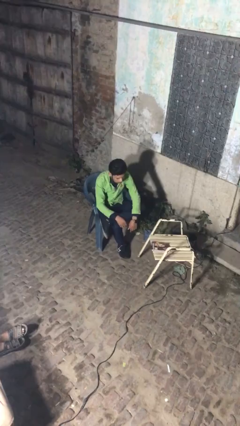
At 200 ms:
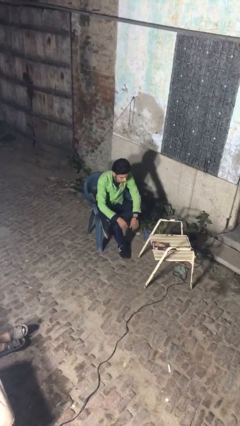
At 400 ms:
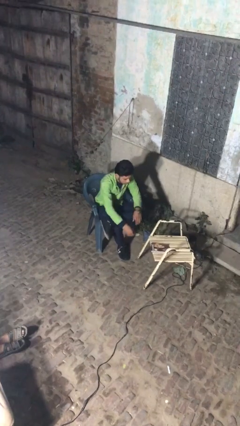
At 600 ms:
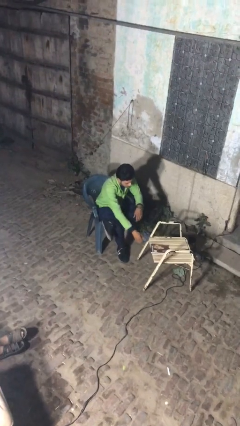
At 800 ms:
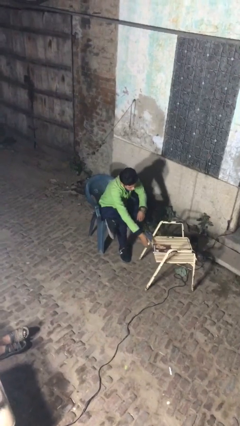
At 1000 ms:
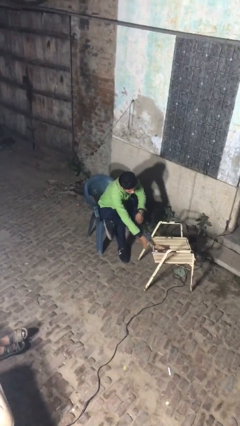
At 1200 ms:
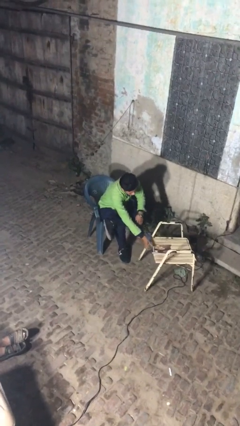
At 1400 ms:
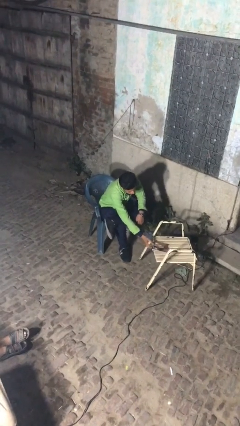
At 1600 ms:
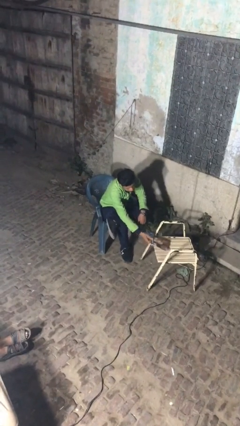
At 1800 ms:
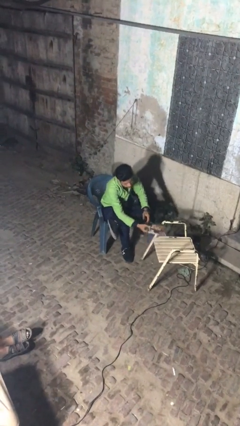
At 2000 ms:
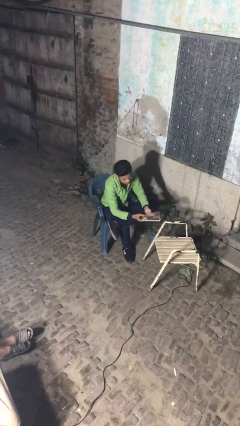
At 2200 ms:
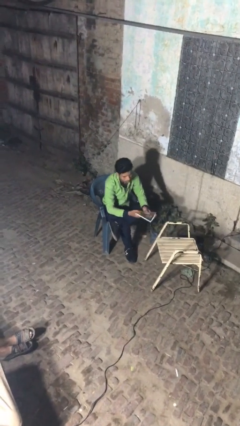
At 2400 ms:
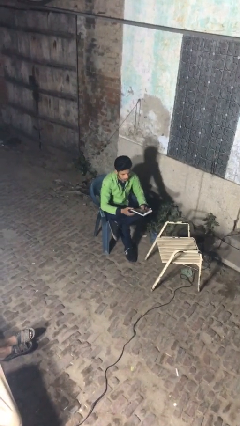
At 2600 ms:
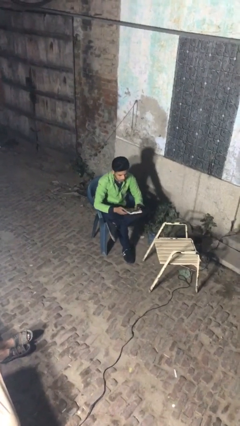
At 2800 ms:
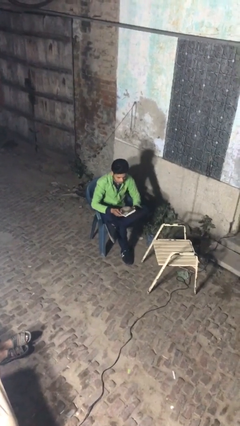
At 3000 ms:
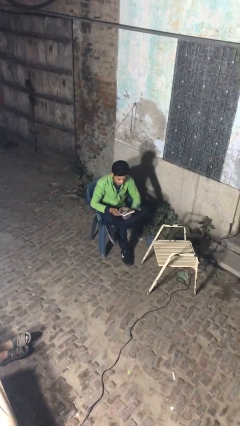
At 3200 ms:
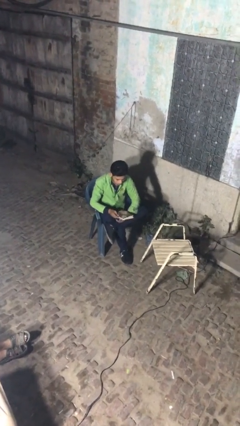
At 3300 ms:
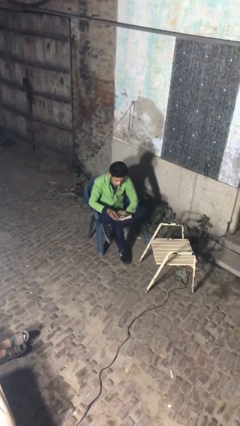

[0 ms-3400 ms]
person picks up object from table

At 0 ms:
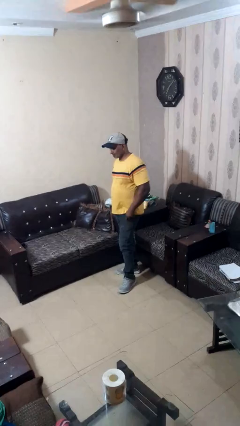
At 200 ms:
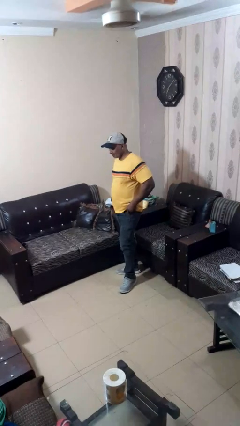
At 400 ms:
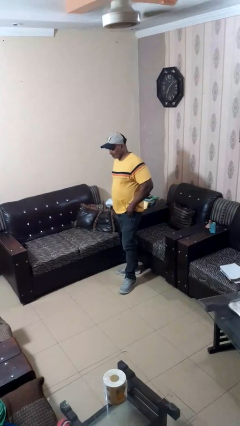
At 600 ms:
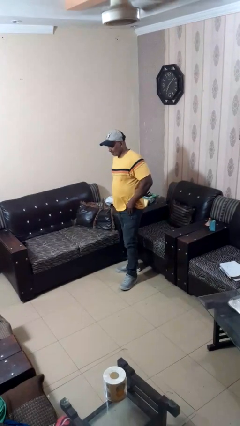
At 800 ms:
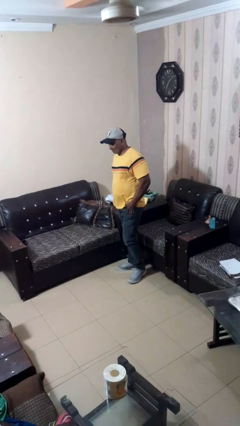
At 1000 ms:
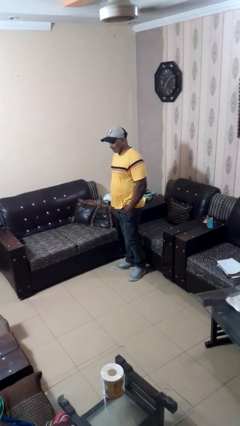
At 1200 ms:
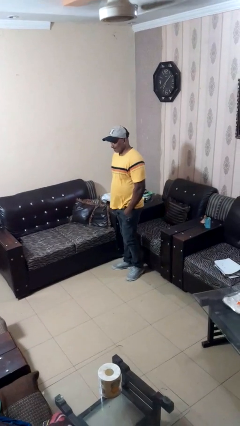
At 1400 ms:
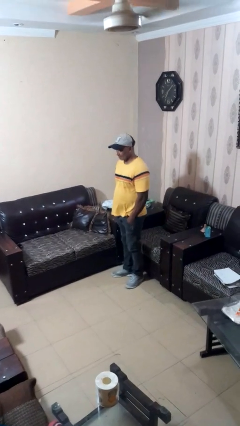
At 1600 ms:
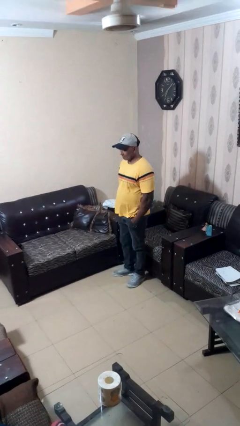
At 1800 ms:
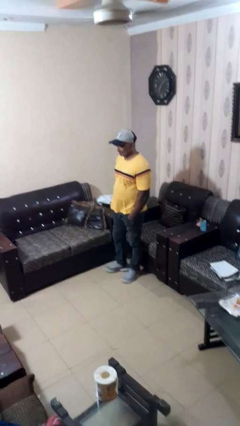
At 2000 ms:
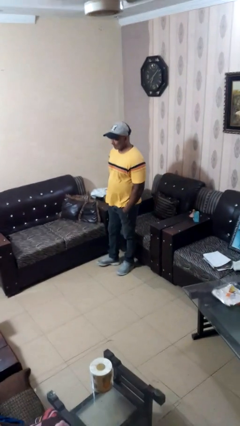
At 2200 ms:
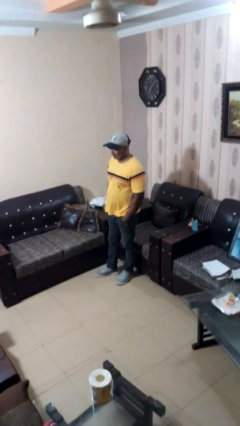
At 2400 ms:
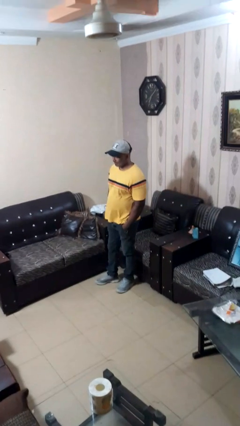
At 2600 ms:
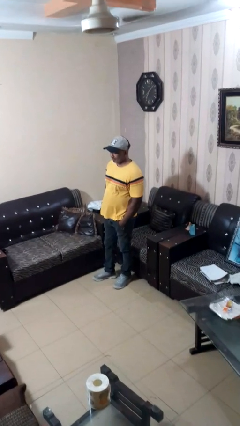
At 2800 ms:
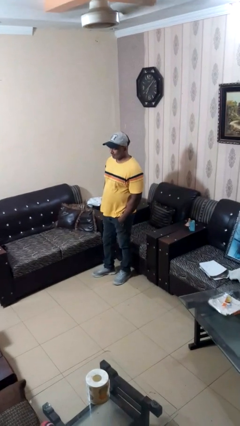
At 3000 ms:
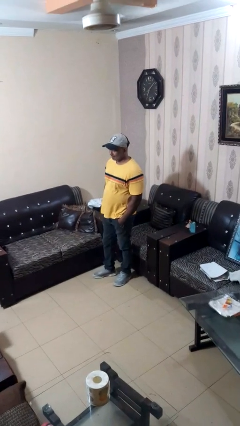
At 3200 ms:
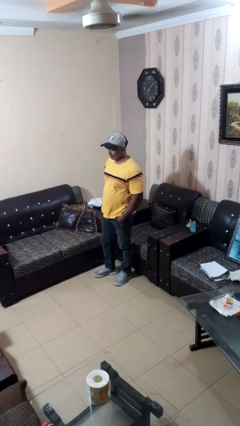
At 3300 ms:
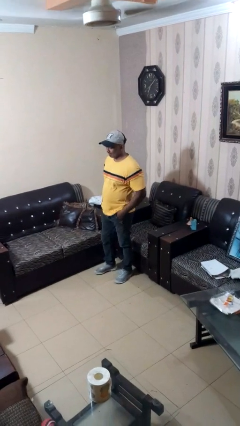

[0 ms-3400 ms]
person puts hands in back pockets

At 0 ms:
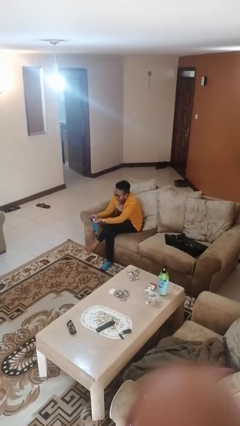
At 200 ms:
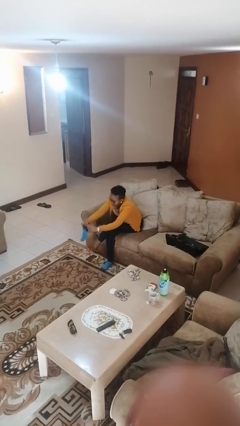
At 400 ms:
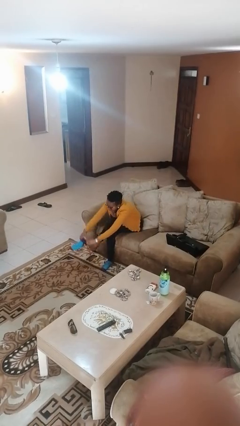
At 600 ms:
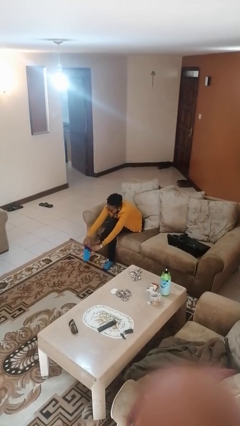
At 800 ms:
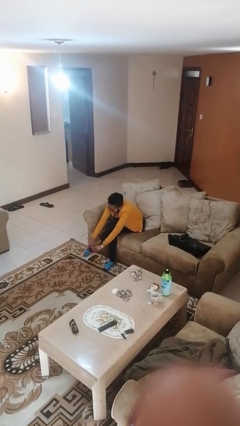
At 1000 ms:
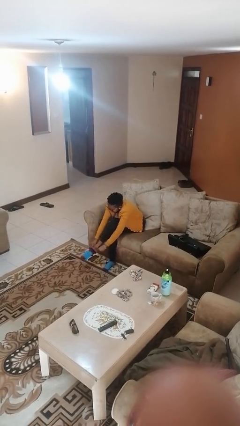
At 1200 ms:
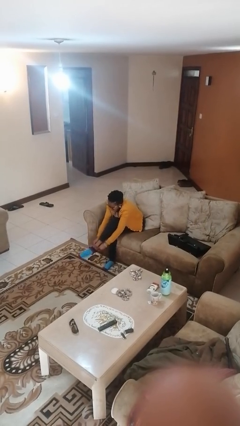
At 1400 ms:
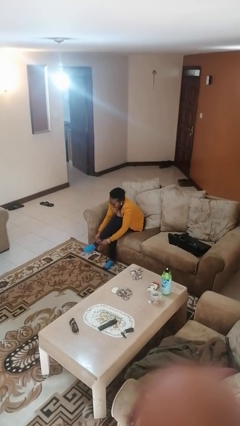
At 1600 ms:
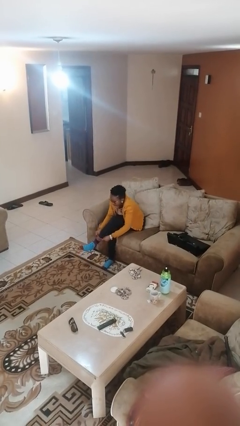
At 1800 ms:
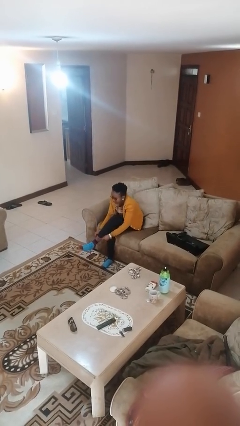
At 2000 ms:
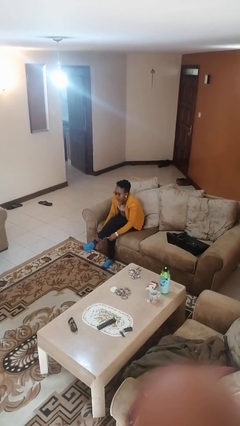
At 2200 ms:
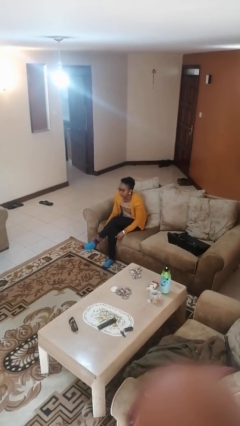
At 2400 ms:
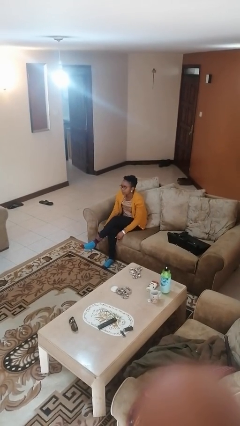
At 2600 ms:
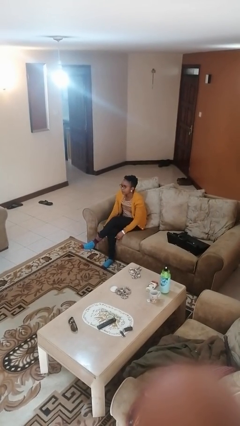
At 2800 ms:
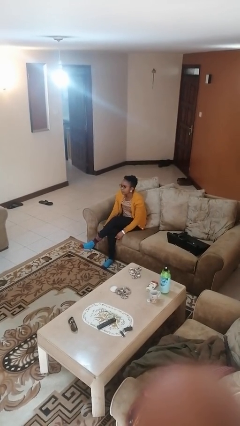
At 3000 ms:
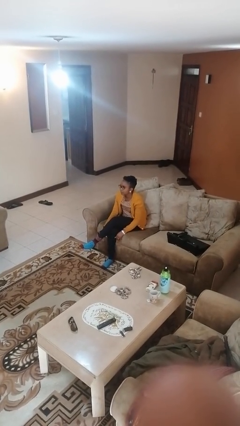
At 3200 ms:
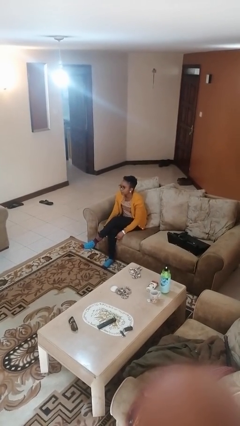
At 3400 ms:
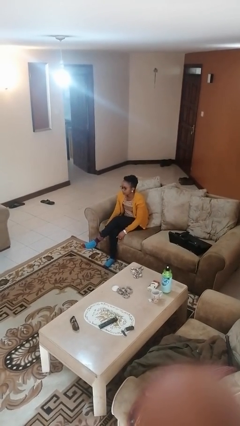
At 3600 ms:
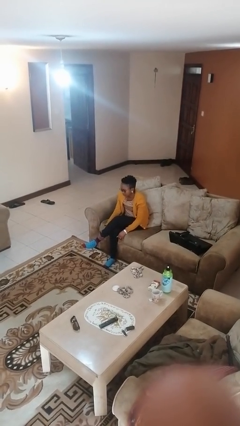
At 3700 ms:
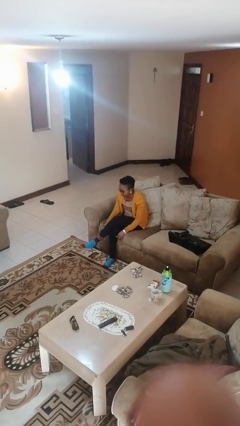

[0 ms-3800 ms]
person puts on socks

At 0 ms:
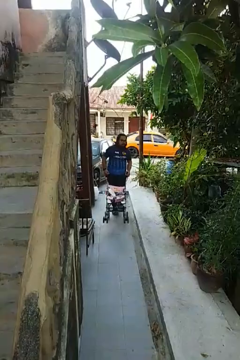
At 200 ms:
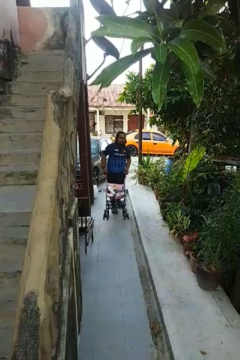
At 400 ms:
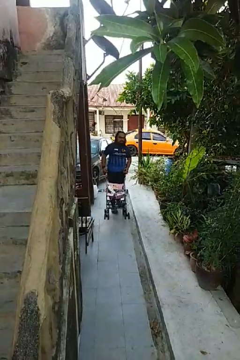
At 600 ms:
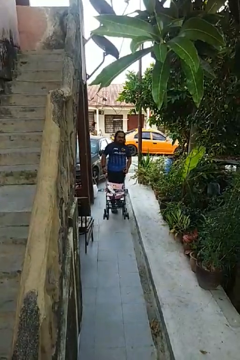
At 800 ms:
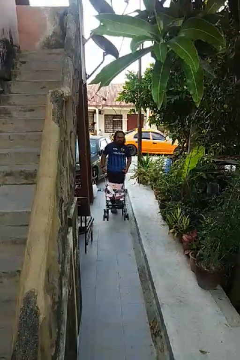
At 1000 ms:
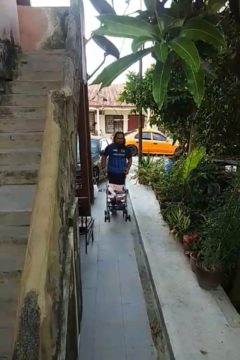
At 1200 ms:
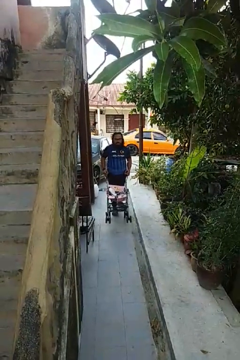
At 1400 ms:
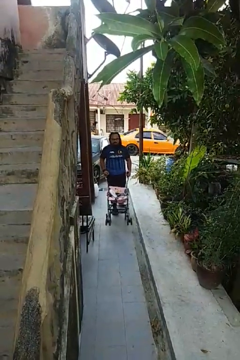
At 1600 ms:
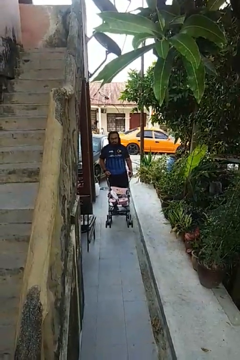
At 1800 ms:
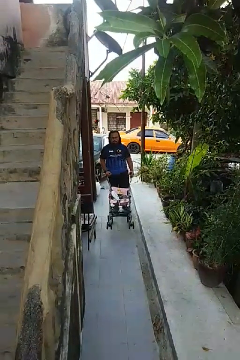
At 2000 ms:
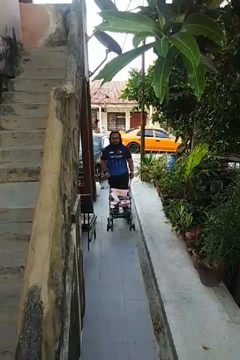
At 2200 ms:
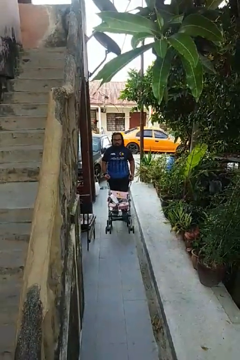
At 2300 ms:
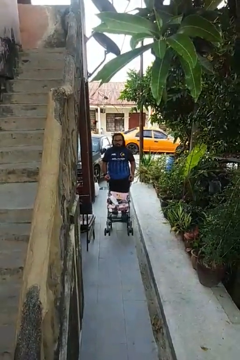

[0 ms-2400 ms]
person pushes wheeled cart

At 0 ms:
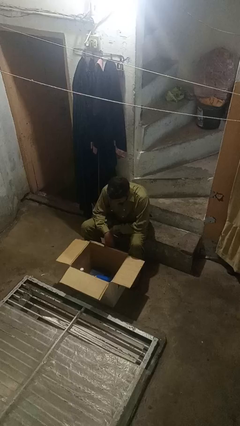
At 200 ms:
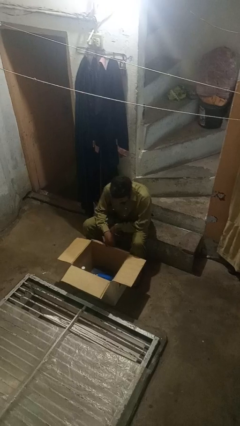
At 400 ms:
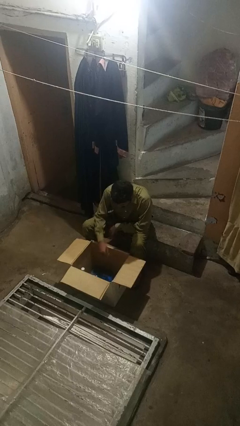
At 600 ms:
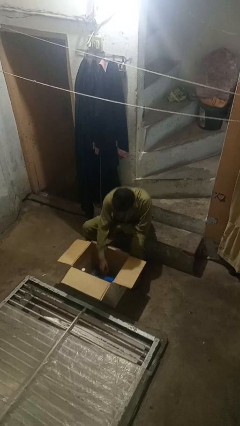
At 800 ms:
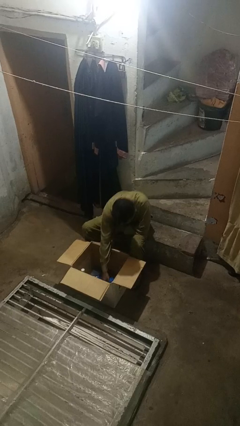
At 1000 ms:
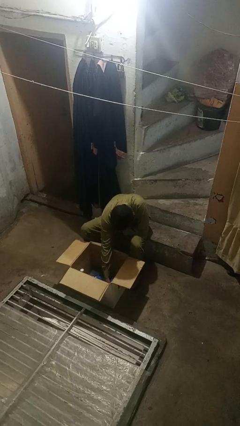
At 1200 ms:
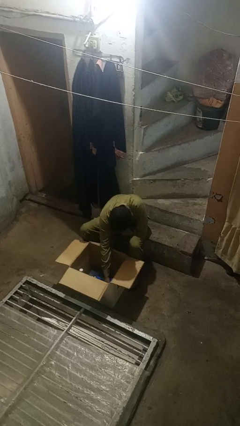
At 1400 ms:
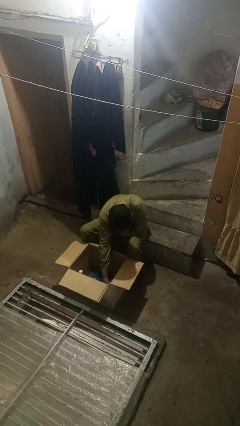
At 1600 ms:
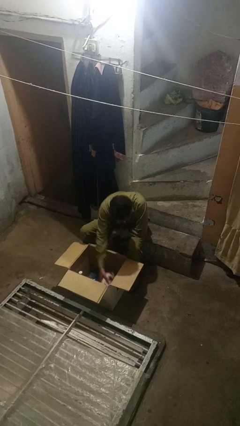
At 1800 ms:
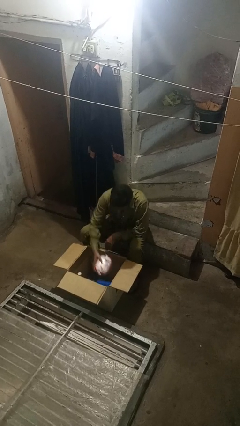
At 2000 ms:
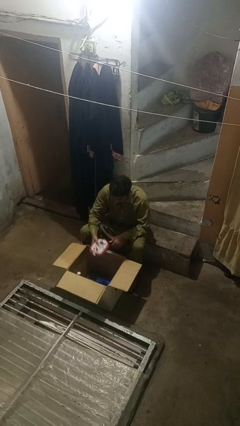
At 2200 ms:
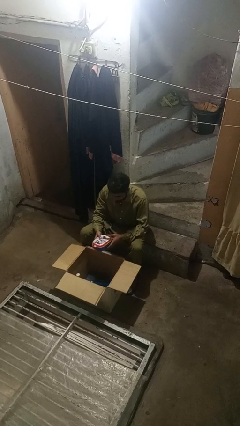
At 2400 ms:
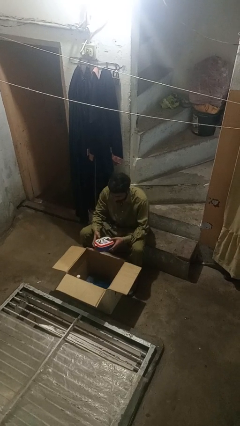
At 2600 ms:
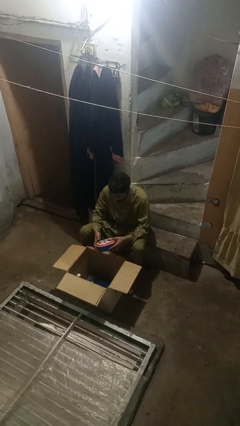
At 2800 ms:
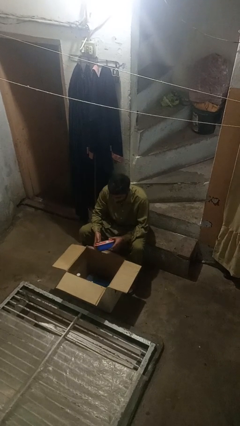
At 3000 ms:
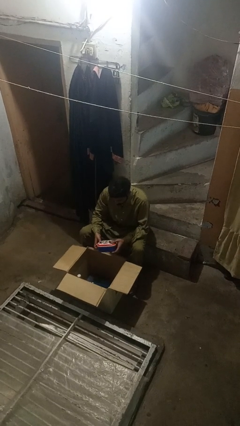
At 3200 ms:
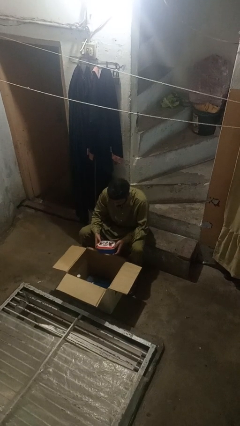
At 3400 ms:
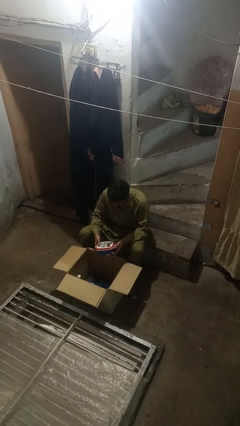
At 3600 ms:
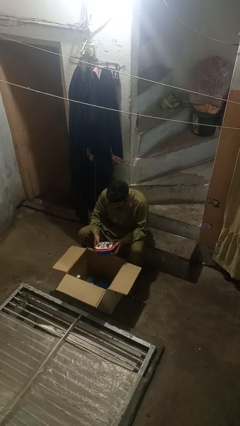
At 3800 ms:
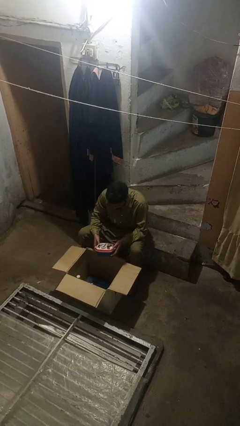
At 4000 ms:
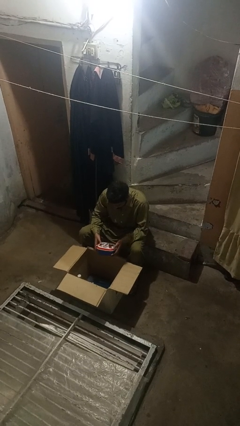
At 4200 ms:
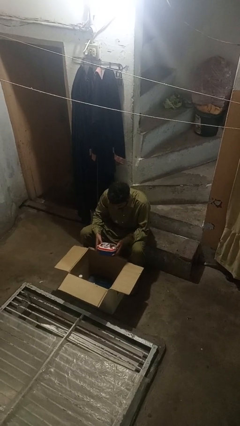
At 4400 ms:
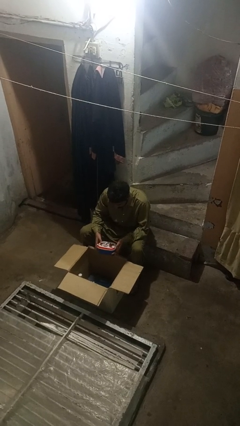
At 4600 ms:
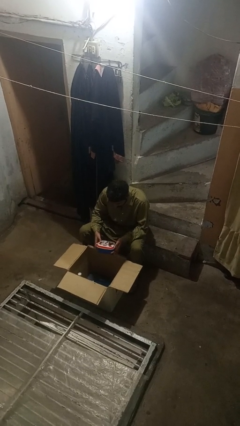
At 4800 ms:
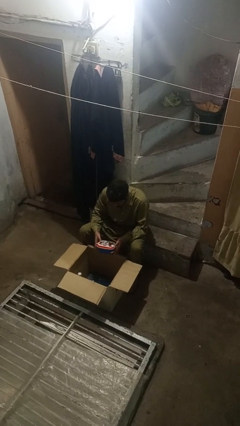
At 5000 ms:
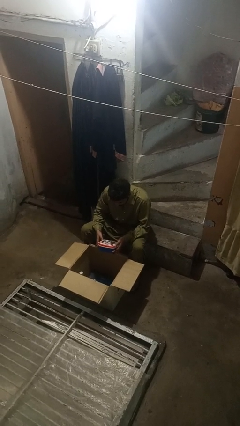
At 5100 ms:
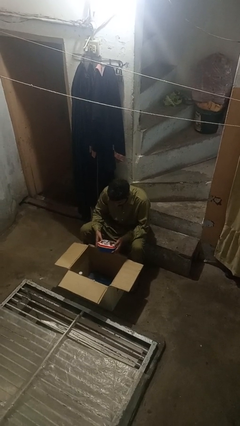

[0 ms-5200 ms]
person takes object from box
